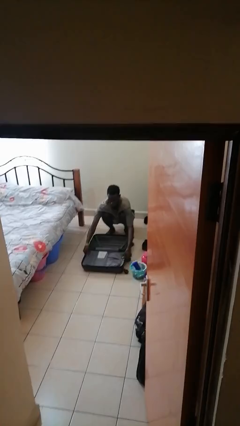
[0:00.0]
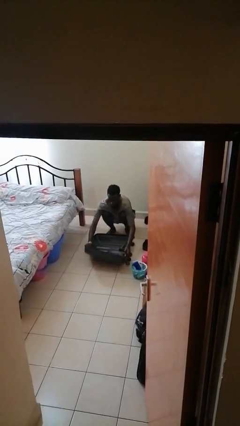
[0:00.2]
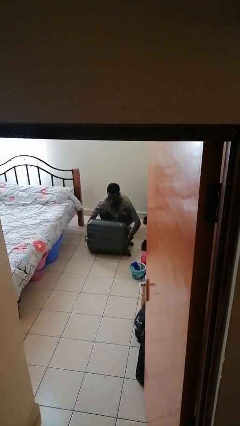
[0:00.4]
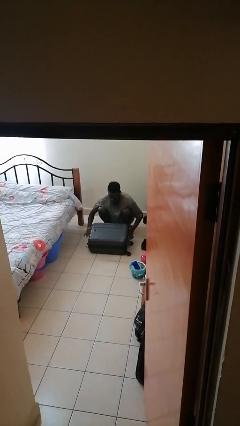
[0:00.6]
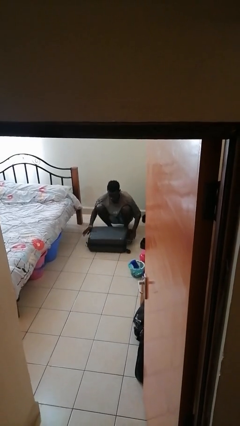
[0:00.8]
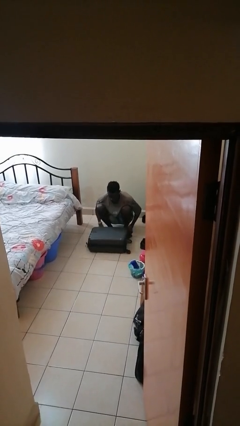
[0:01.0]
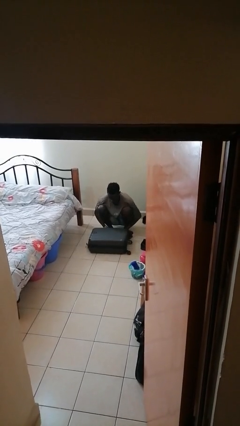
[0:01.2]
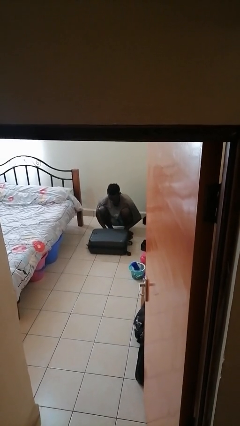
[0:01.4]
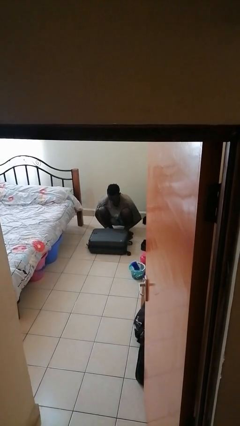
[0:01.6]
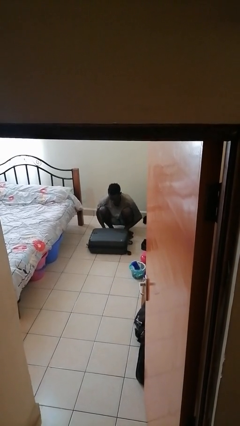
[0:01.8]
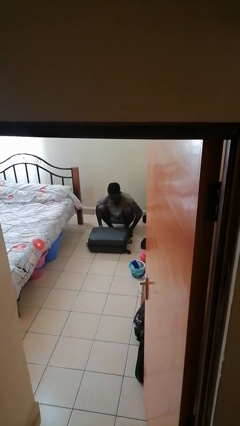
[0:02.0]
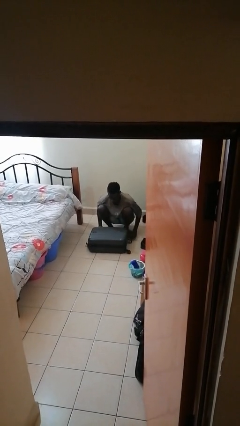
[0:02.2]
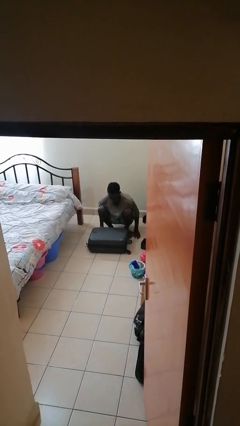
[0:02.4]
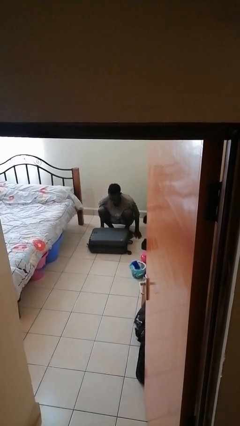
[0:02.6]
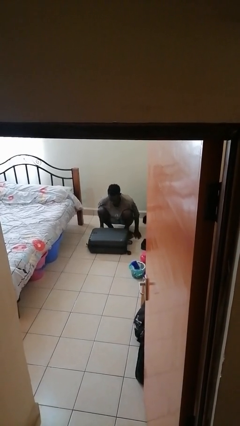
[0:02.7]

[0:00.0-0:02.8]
person closes suitcase

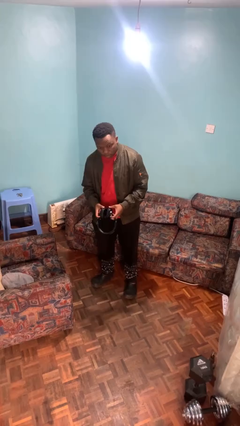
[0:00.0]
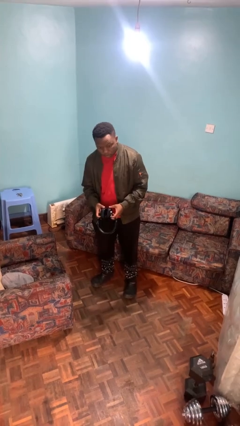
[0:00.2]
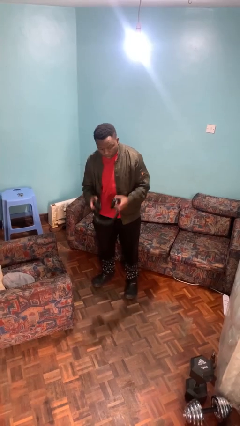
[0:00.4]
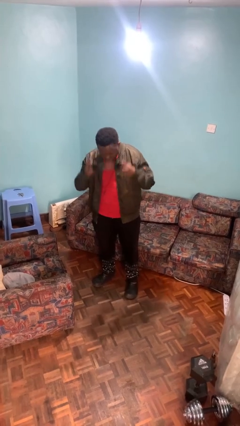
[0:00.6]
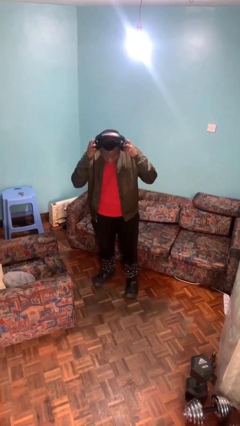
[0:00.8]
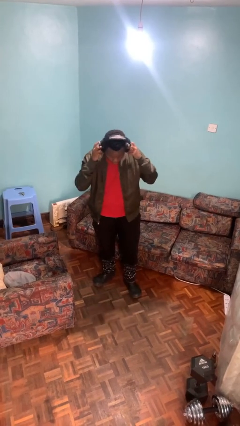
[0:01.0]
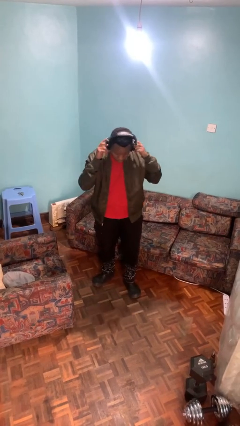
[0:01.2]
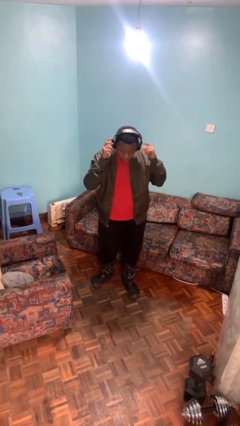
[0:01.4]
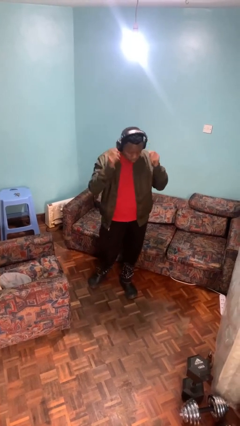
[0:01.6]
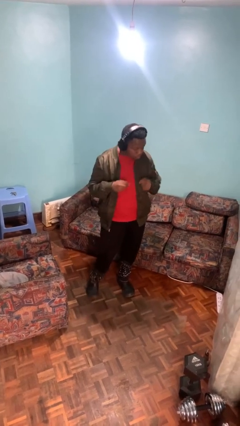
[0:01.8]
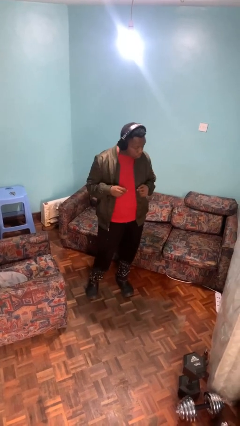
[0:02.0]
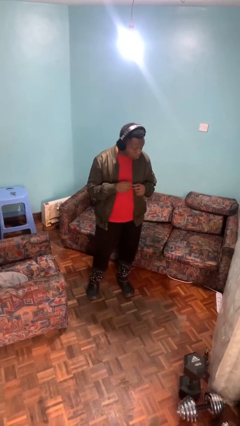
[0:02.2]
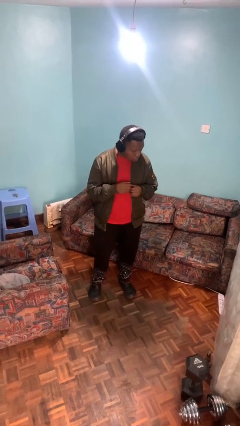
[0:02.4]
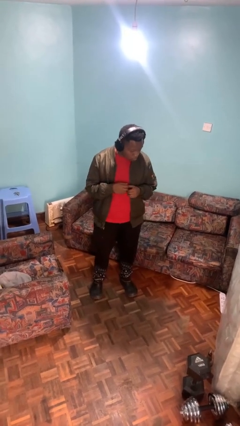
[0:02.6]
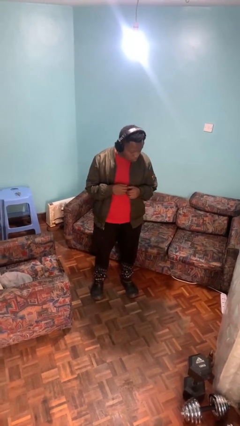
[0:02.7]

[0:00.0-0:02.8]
person puts on headphones

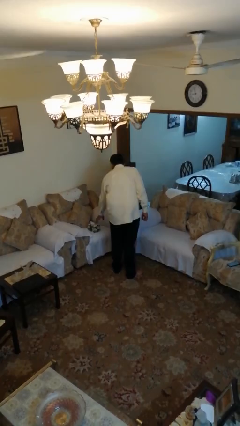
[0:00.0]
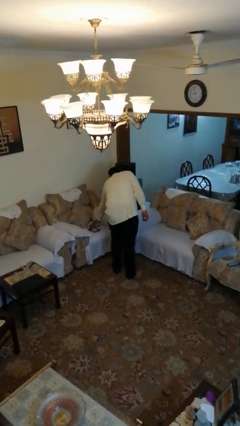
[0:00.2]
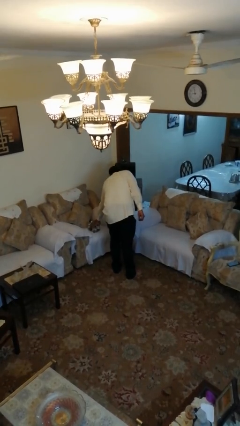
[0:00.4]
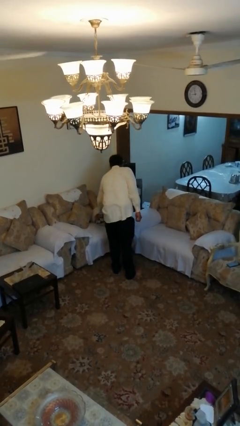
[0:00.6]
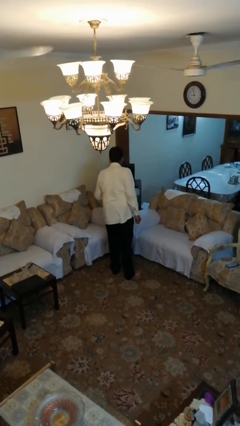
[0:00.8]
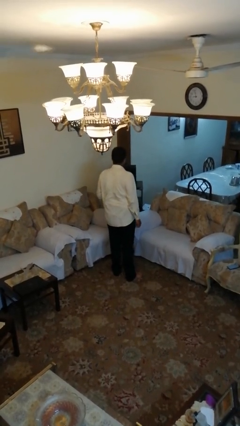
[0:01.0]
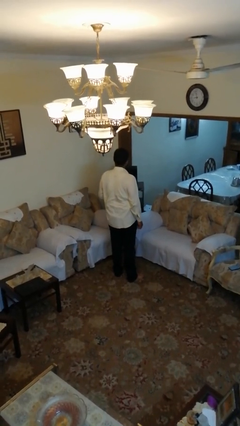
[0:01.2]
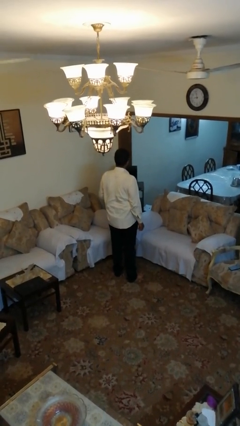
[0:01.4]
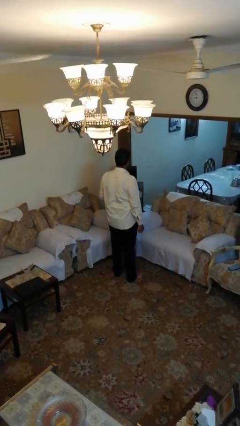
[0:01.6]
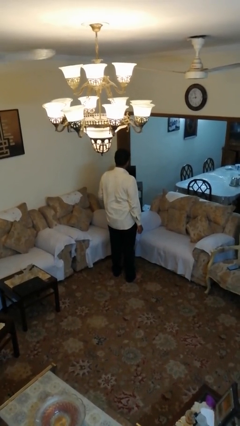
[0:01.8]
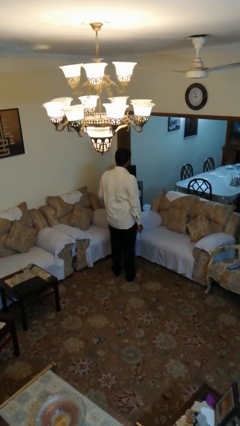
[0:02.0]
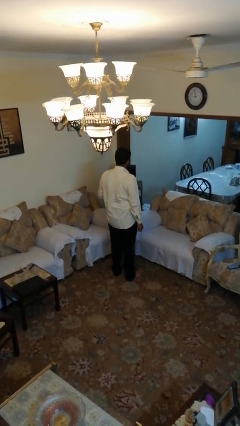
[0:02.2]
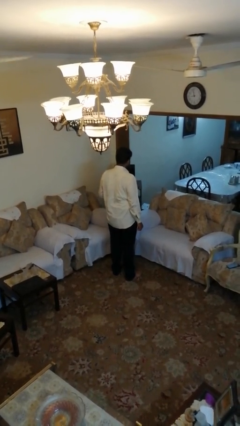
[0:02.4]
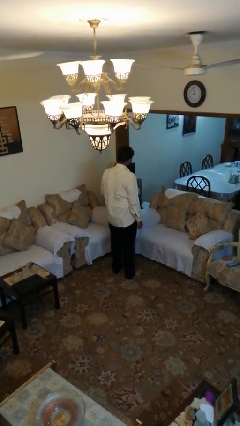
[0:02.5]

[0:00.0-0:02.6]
person picks up object from couch

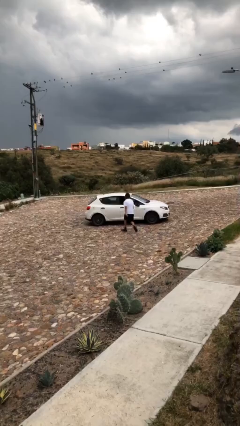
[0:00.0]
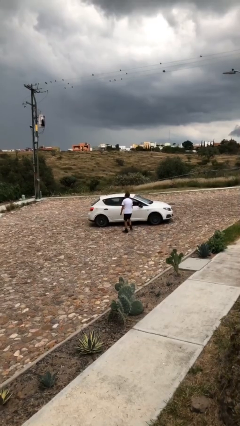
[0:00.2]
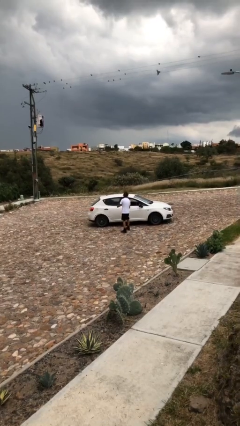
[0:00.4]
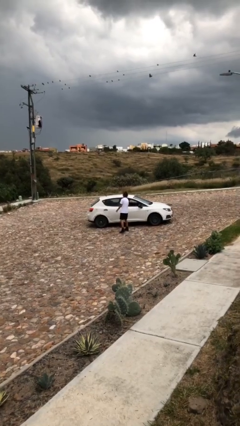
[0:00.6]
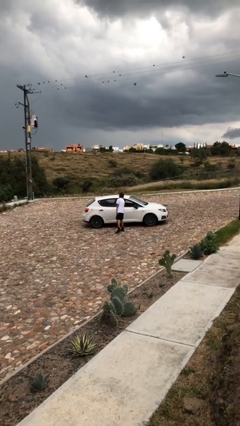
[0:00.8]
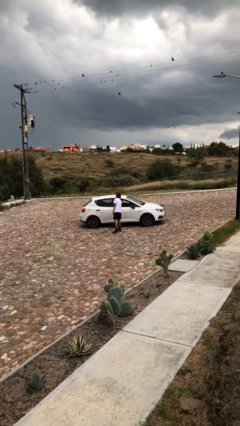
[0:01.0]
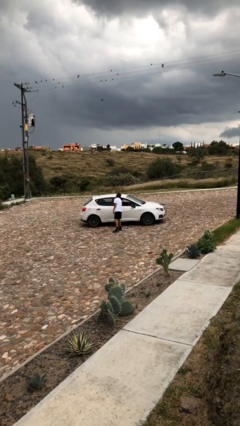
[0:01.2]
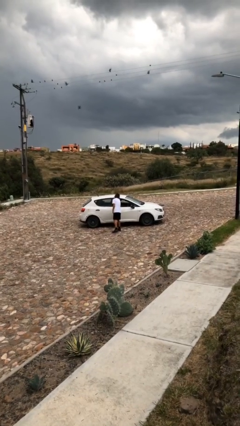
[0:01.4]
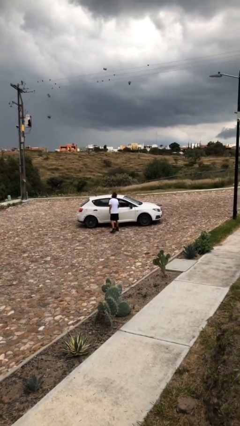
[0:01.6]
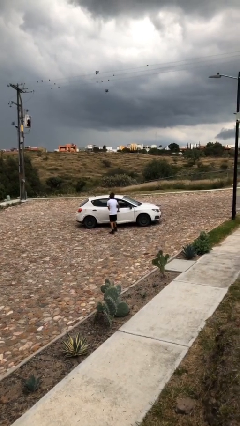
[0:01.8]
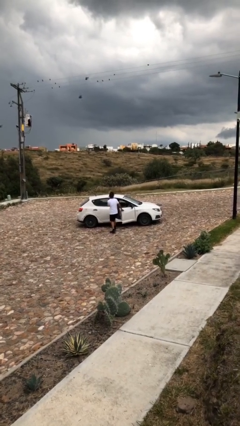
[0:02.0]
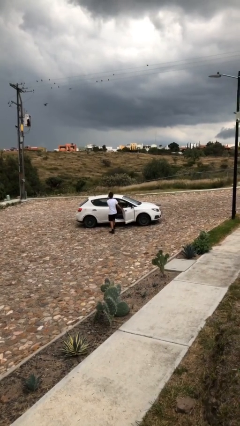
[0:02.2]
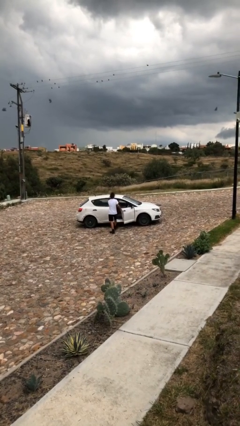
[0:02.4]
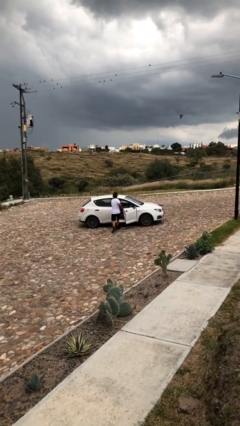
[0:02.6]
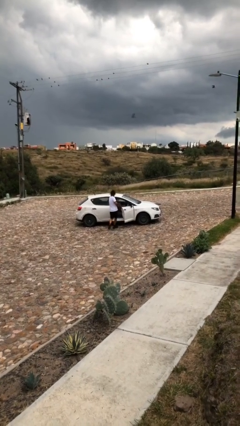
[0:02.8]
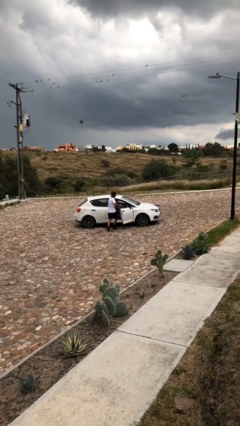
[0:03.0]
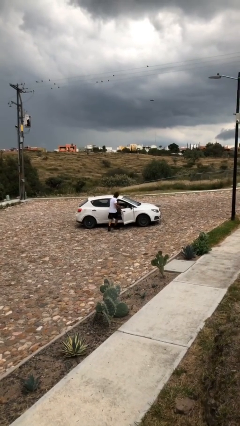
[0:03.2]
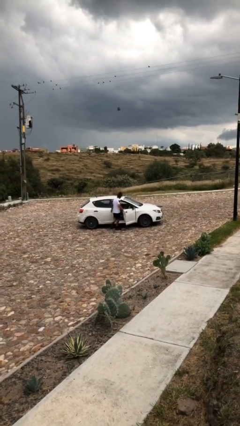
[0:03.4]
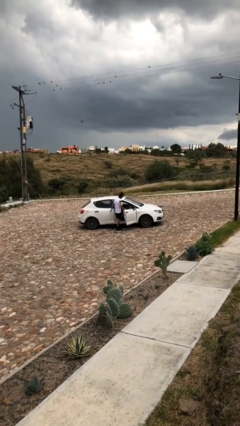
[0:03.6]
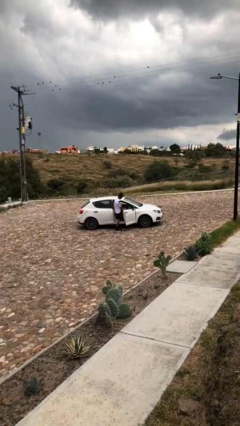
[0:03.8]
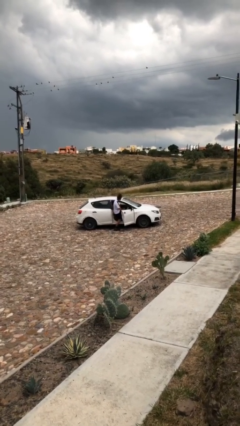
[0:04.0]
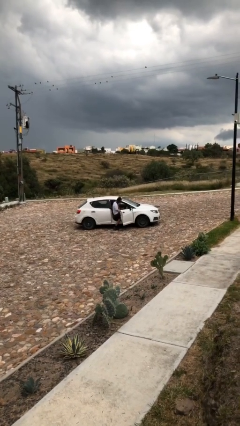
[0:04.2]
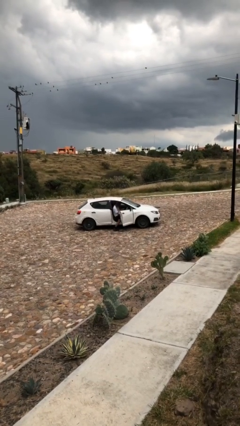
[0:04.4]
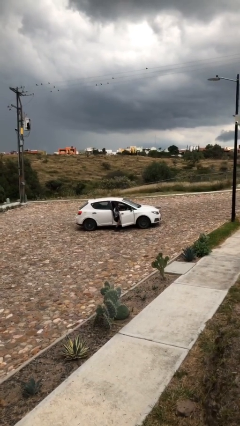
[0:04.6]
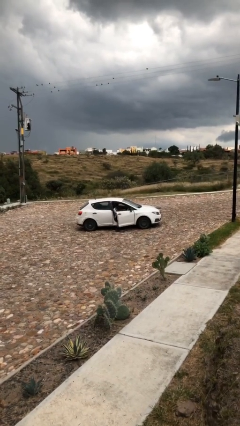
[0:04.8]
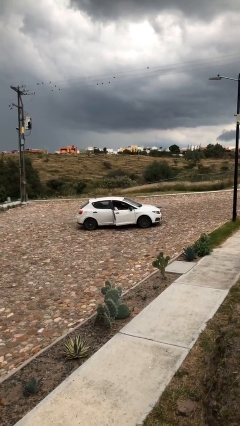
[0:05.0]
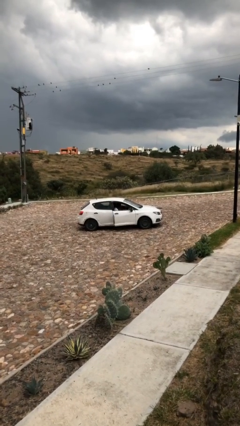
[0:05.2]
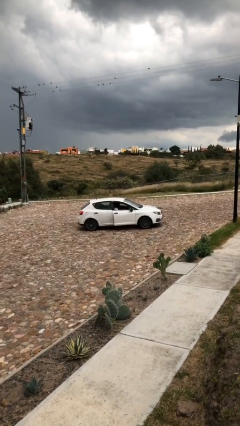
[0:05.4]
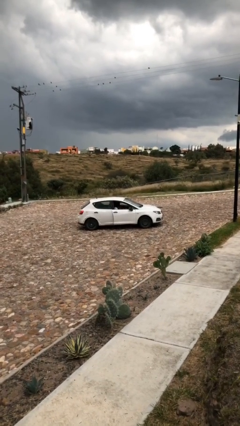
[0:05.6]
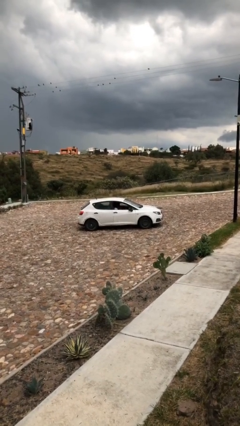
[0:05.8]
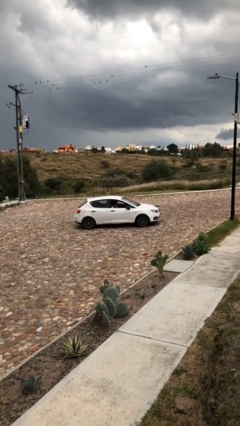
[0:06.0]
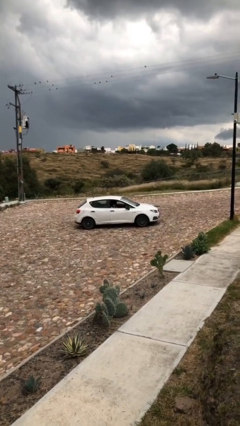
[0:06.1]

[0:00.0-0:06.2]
car picks up person

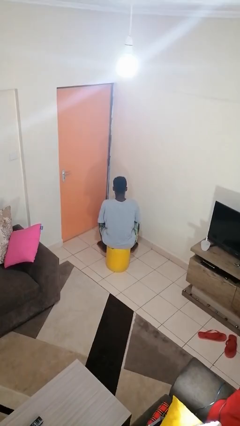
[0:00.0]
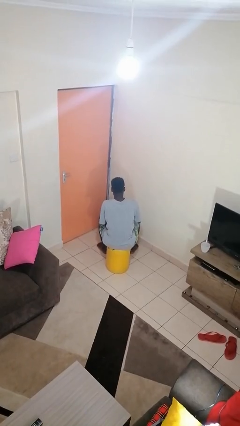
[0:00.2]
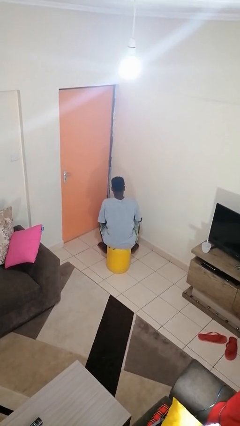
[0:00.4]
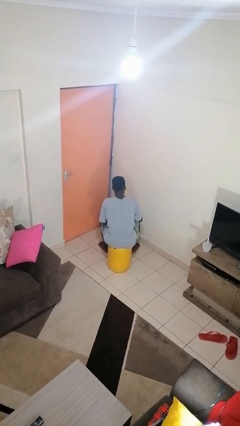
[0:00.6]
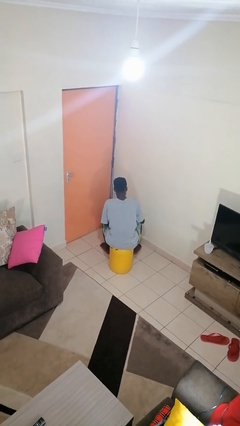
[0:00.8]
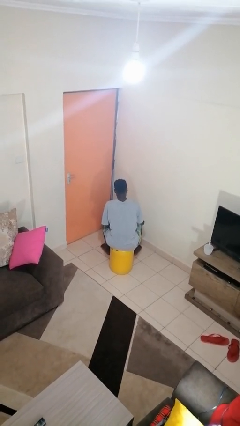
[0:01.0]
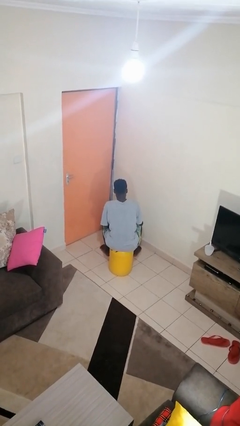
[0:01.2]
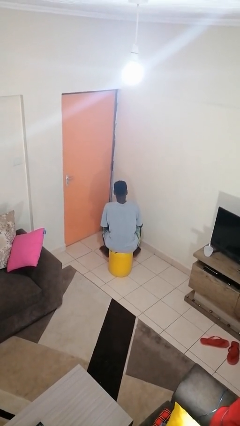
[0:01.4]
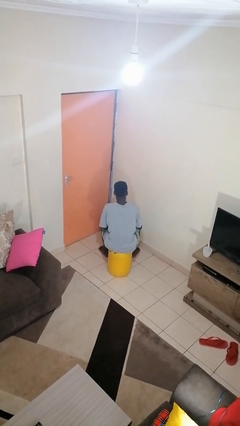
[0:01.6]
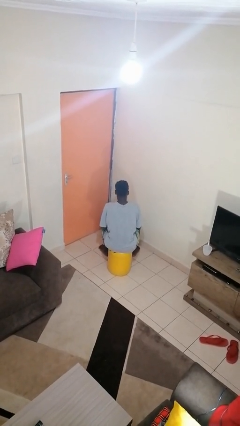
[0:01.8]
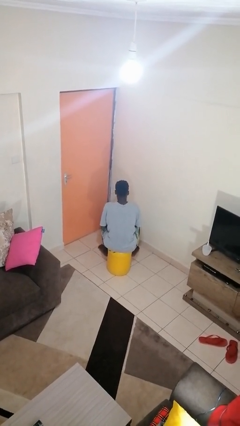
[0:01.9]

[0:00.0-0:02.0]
person stirs mug

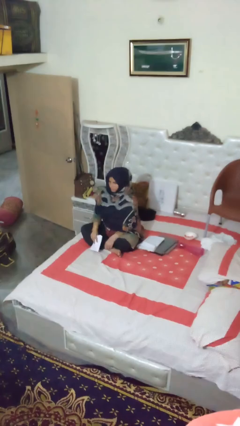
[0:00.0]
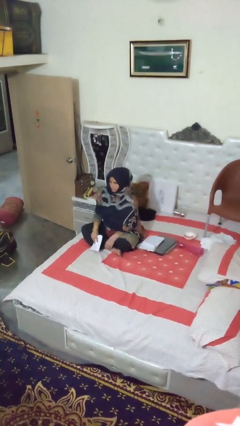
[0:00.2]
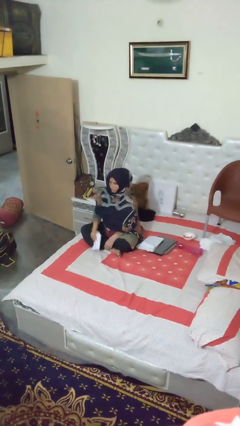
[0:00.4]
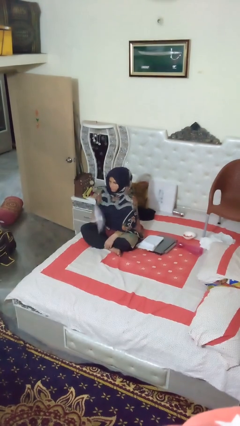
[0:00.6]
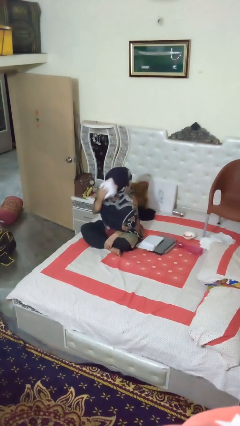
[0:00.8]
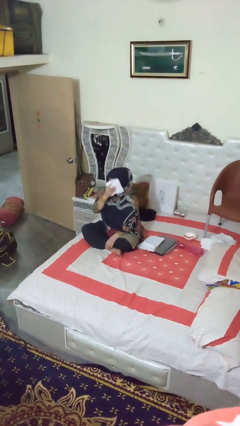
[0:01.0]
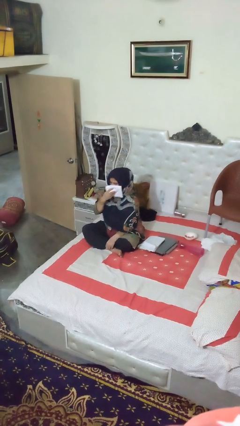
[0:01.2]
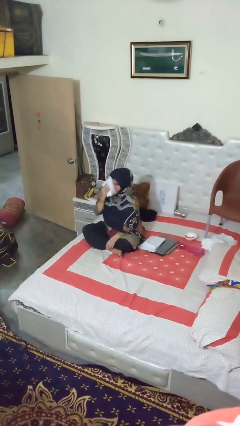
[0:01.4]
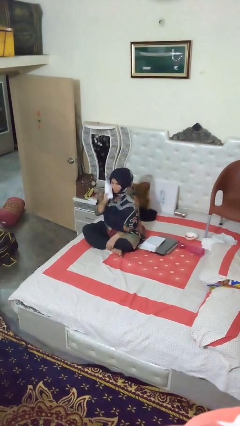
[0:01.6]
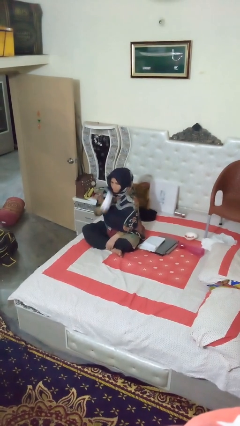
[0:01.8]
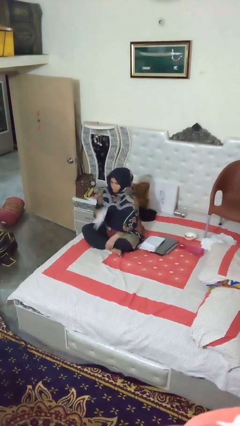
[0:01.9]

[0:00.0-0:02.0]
person wipes mouth with napkin
